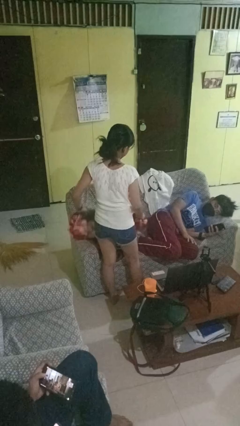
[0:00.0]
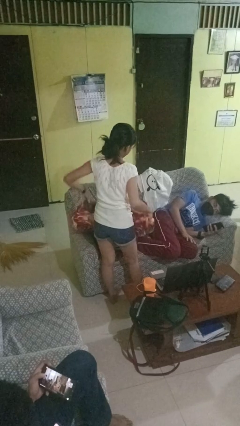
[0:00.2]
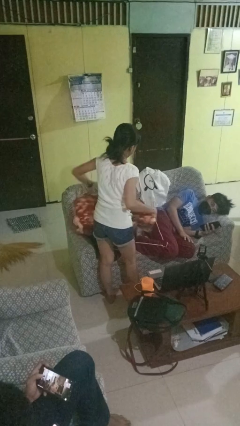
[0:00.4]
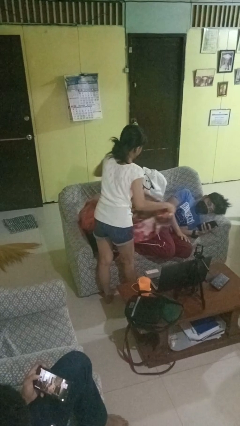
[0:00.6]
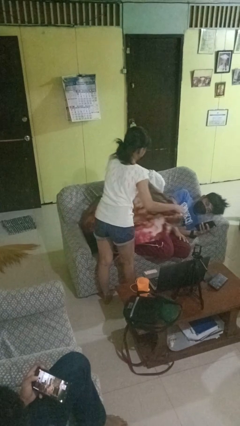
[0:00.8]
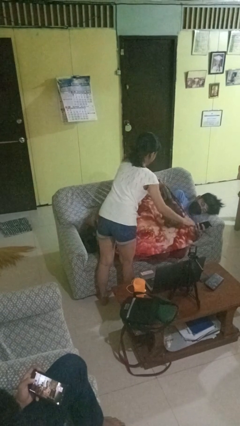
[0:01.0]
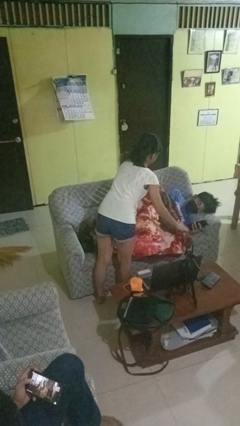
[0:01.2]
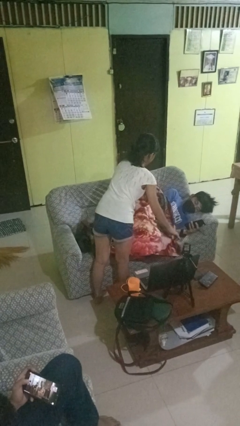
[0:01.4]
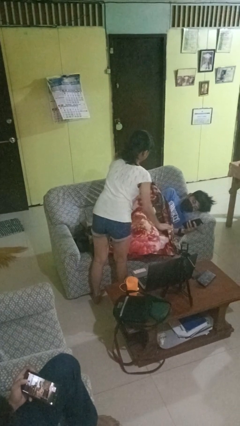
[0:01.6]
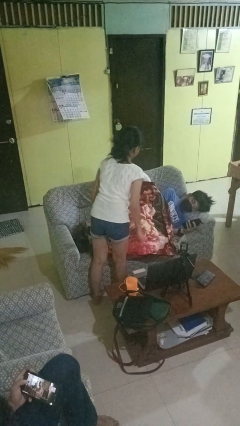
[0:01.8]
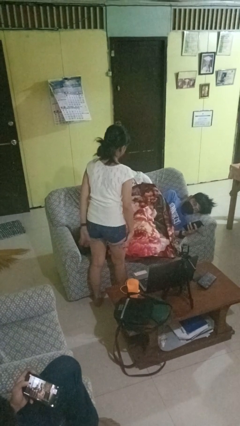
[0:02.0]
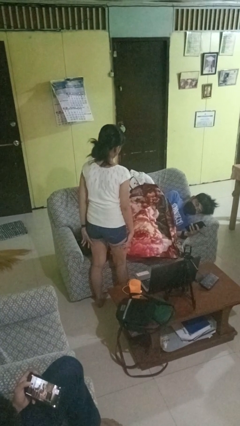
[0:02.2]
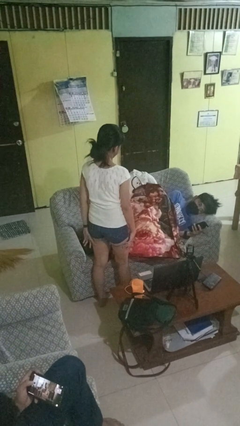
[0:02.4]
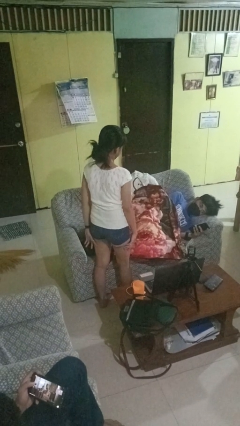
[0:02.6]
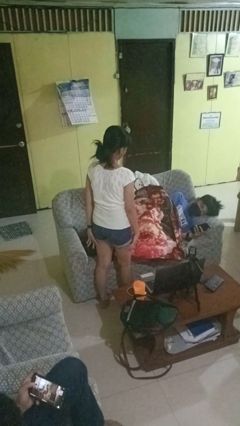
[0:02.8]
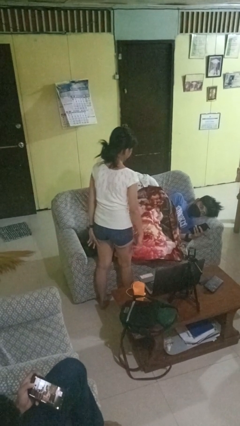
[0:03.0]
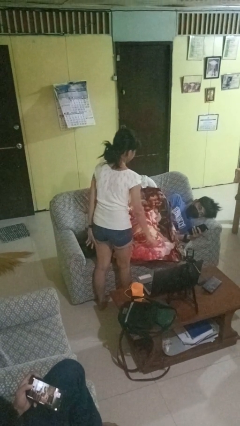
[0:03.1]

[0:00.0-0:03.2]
person covers friend with blanket

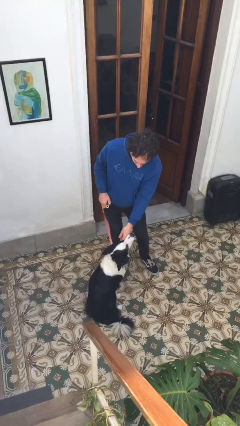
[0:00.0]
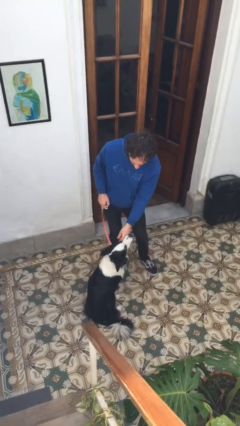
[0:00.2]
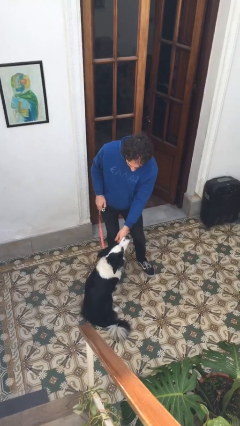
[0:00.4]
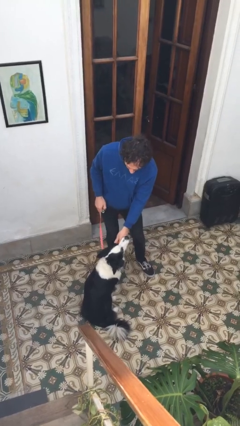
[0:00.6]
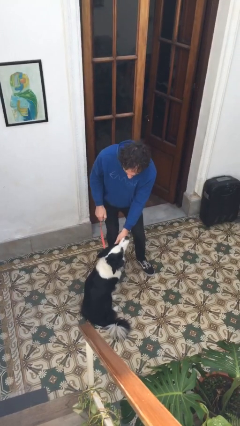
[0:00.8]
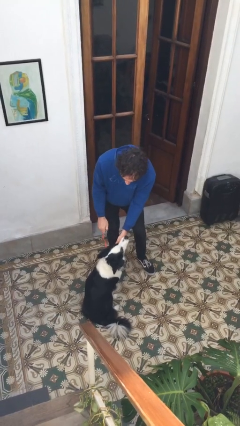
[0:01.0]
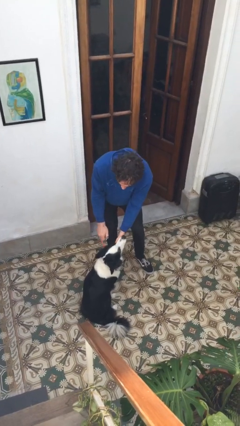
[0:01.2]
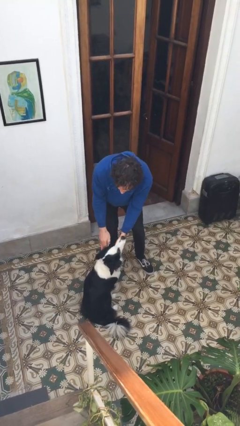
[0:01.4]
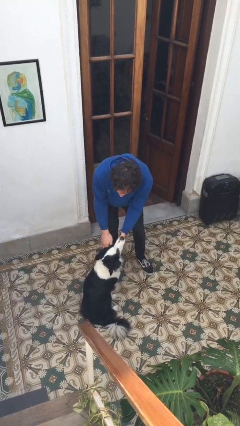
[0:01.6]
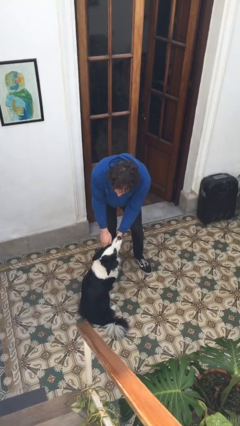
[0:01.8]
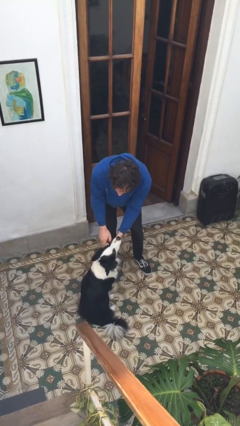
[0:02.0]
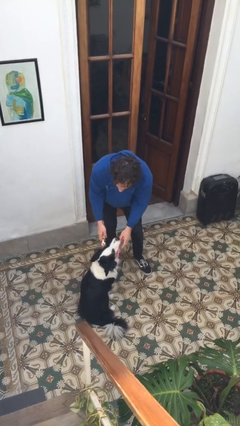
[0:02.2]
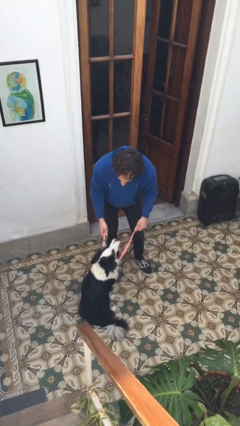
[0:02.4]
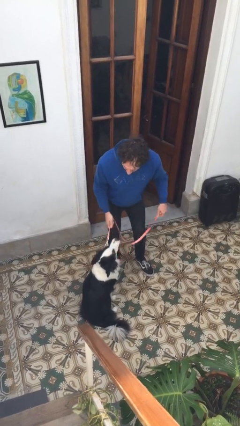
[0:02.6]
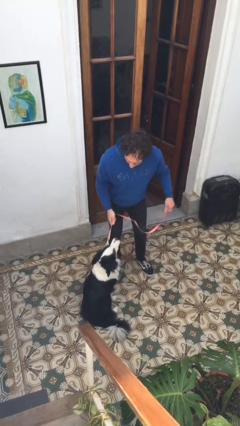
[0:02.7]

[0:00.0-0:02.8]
person attaches leash to dog

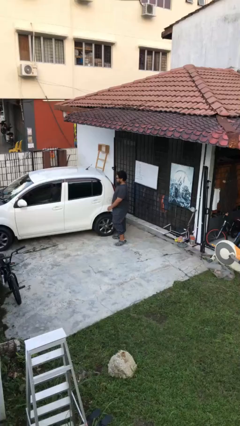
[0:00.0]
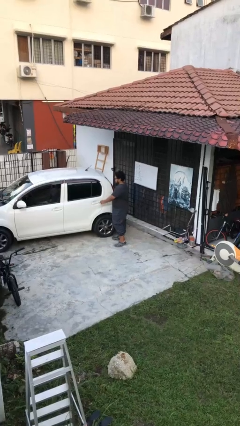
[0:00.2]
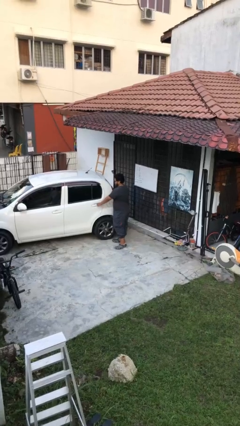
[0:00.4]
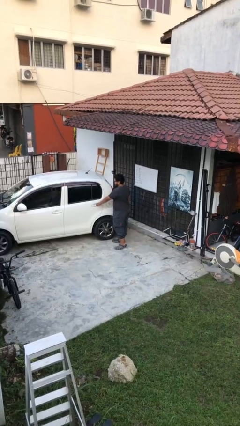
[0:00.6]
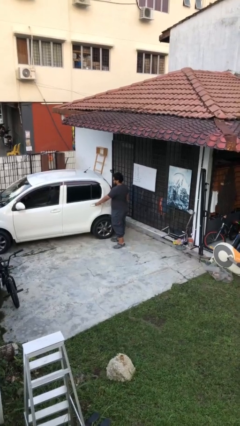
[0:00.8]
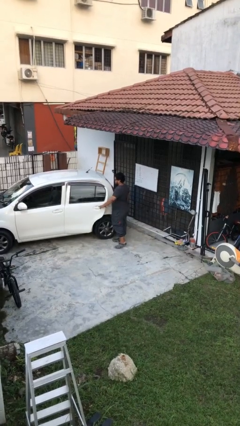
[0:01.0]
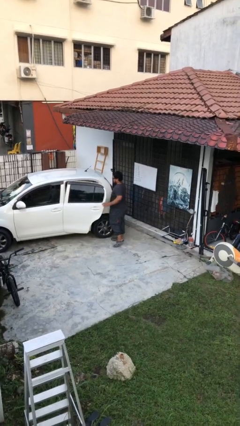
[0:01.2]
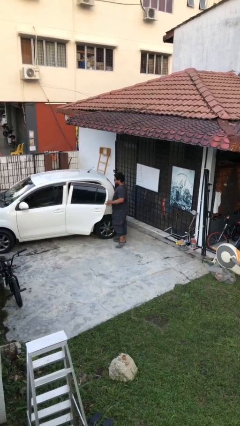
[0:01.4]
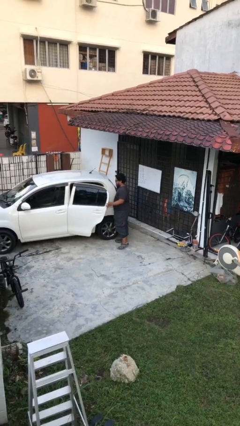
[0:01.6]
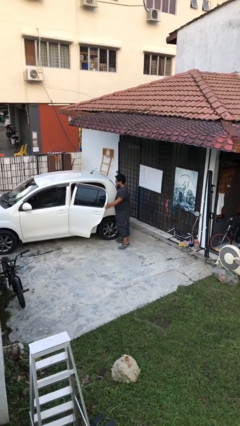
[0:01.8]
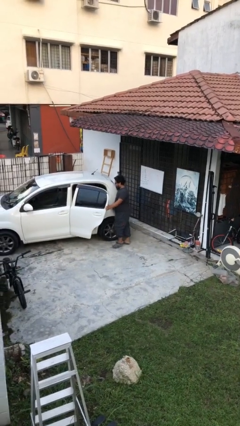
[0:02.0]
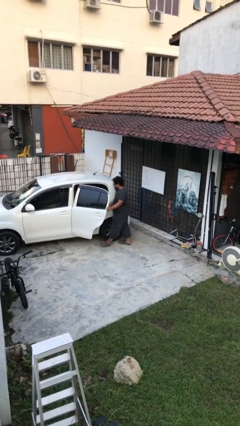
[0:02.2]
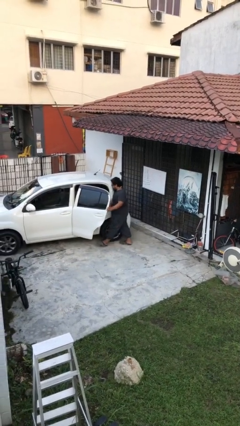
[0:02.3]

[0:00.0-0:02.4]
person opens car door

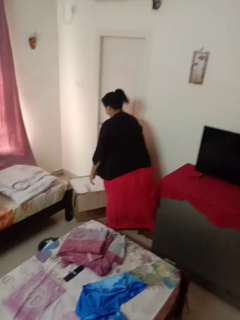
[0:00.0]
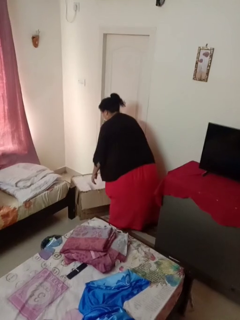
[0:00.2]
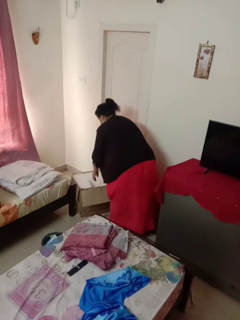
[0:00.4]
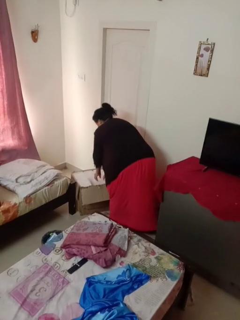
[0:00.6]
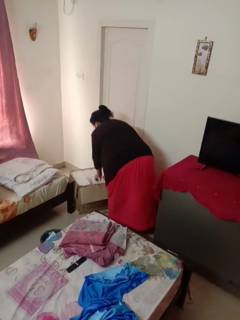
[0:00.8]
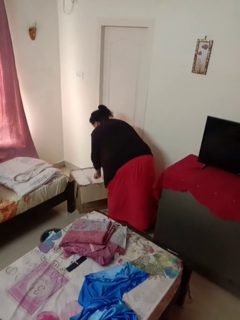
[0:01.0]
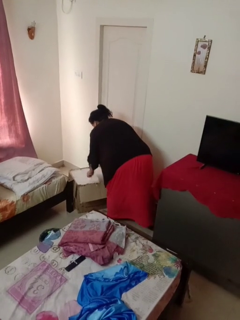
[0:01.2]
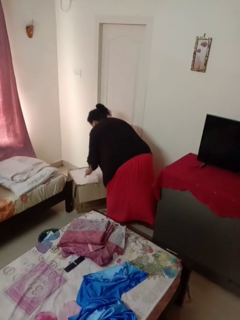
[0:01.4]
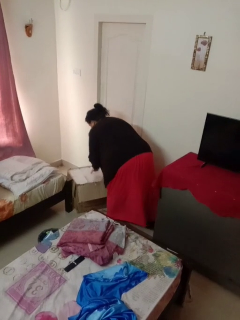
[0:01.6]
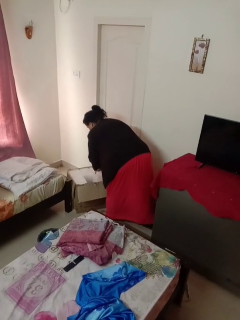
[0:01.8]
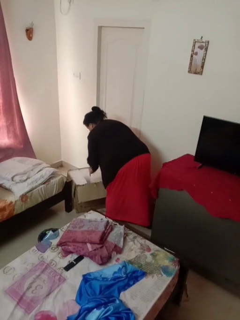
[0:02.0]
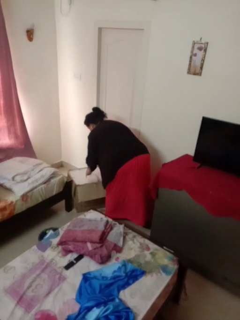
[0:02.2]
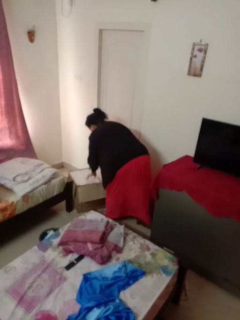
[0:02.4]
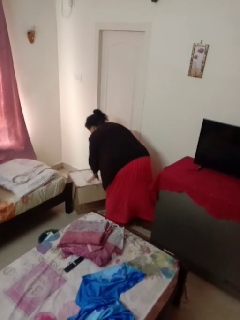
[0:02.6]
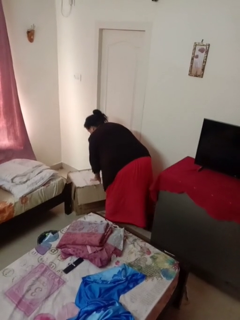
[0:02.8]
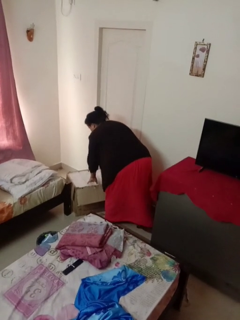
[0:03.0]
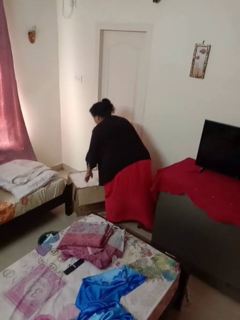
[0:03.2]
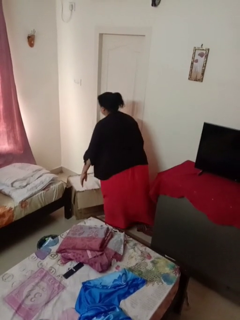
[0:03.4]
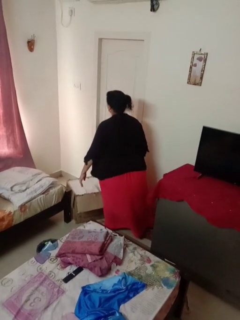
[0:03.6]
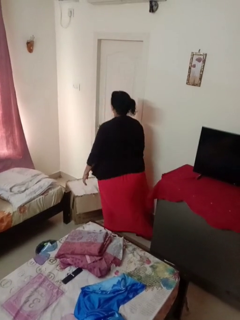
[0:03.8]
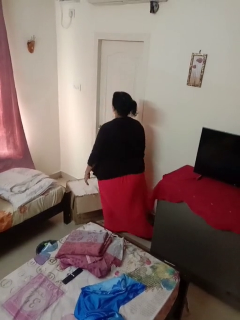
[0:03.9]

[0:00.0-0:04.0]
person searches in box

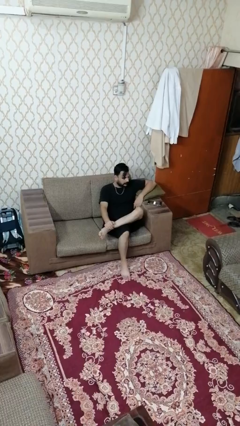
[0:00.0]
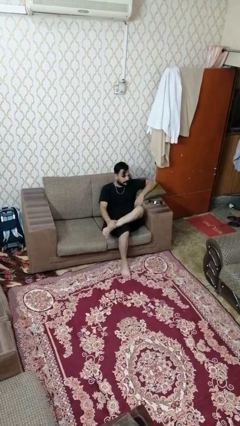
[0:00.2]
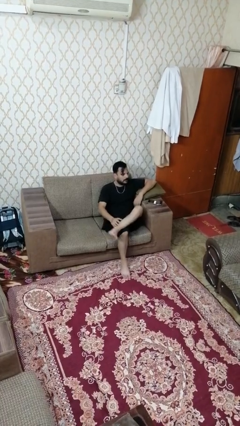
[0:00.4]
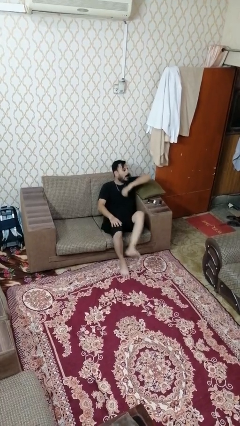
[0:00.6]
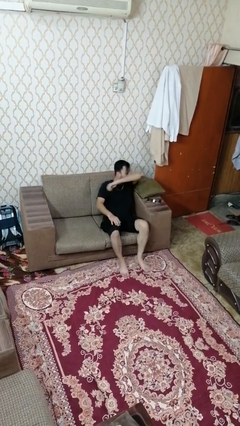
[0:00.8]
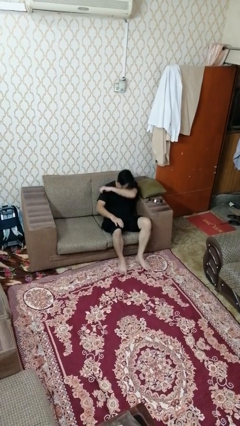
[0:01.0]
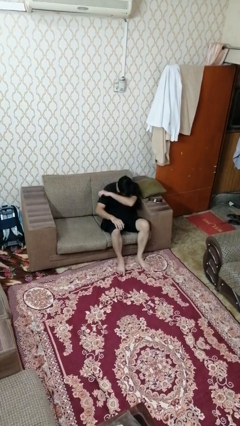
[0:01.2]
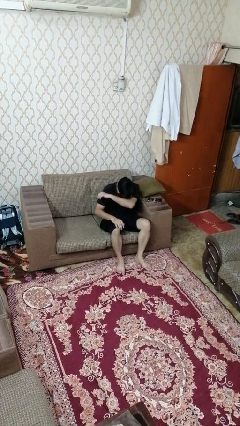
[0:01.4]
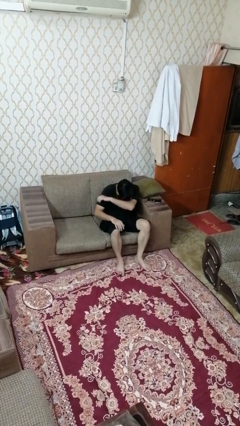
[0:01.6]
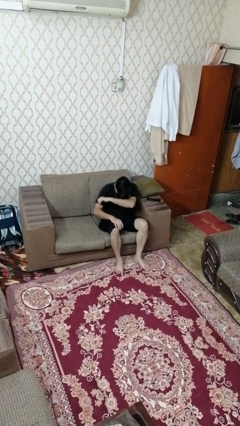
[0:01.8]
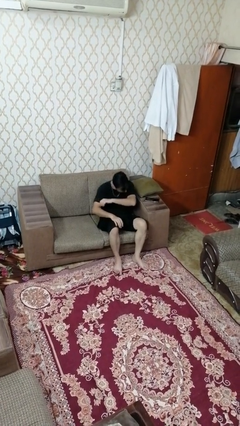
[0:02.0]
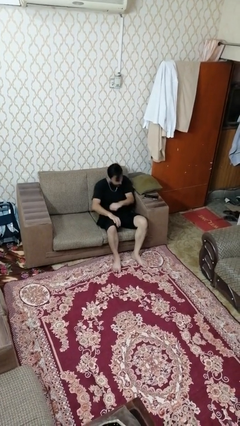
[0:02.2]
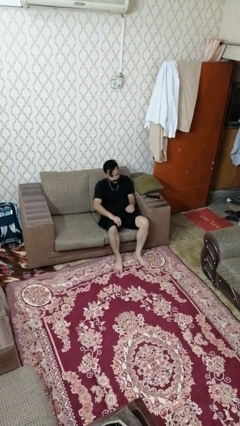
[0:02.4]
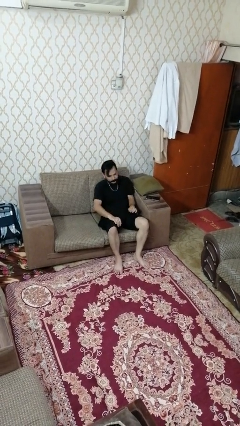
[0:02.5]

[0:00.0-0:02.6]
person sneezes into arm

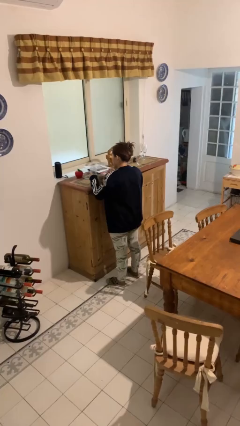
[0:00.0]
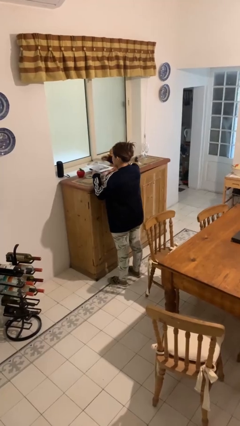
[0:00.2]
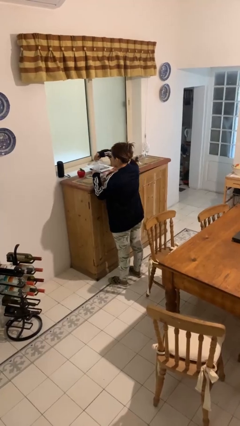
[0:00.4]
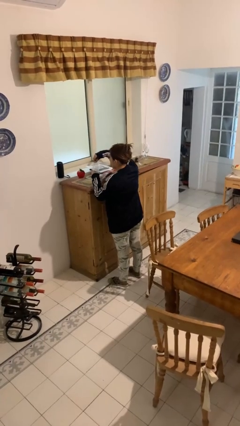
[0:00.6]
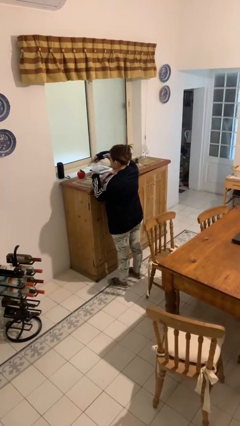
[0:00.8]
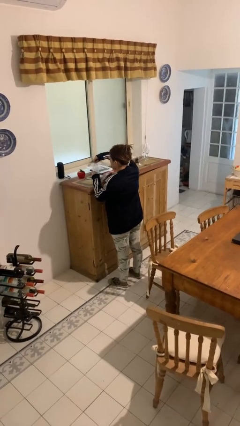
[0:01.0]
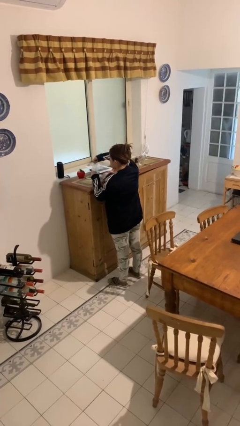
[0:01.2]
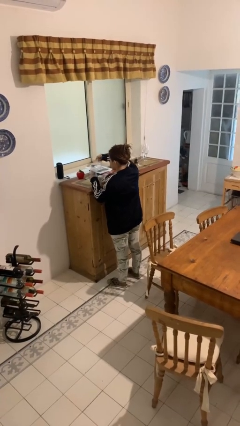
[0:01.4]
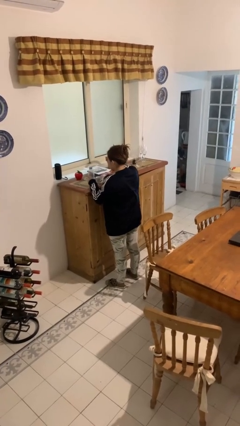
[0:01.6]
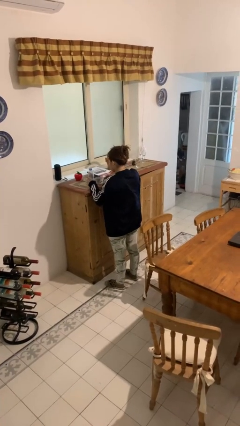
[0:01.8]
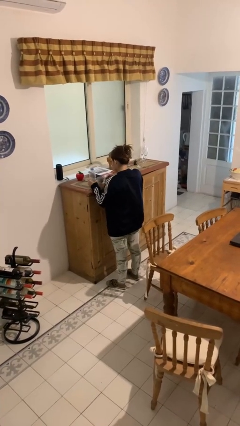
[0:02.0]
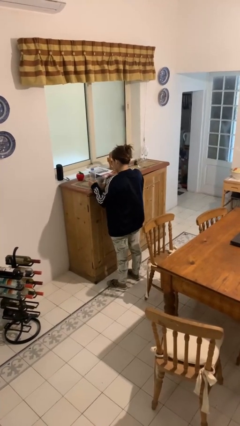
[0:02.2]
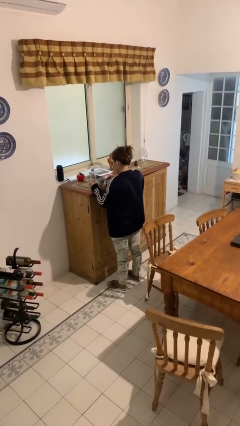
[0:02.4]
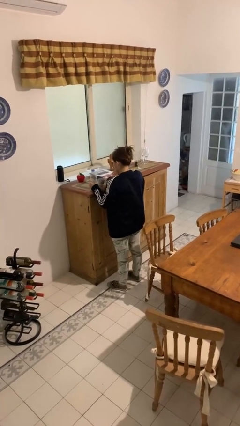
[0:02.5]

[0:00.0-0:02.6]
person screws lid to bottle

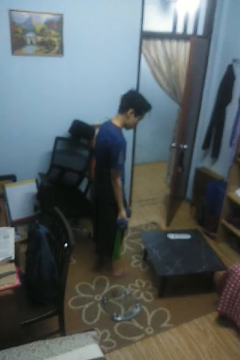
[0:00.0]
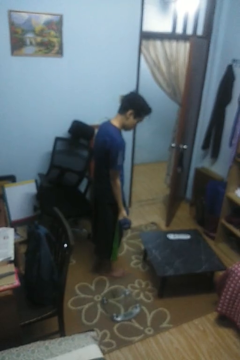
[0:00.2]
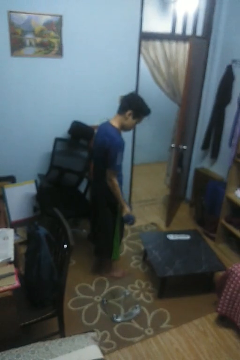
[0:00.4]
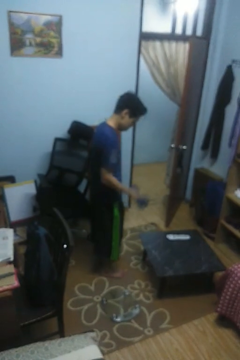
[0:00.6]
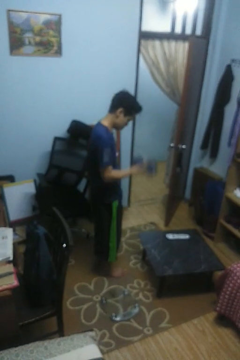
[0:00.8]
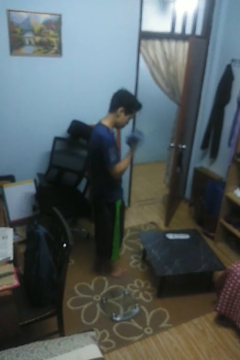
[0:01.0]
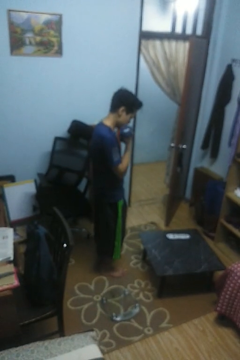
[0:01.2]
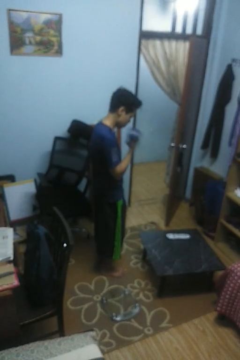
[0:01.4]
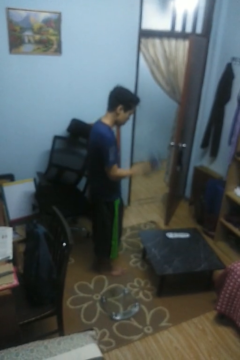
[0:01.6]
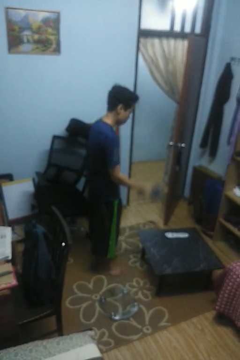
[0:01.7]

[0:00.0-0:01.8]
person lifts dumbbells
